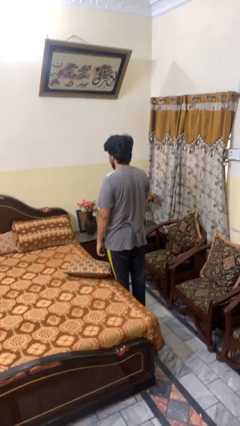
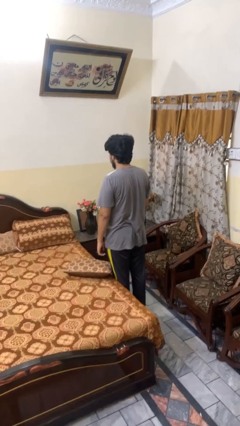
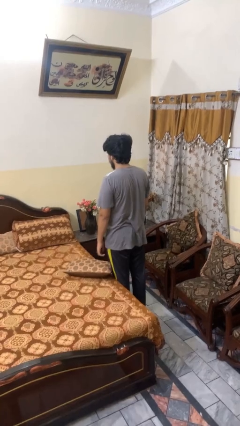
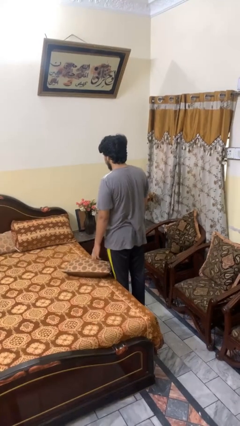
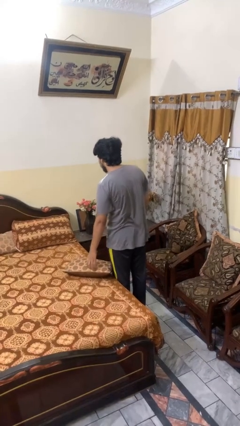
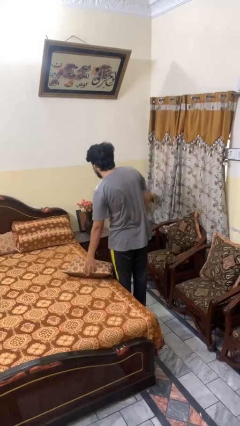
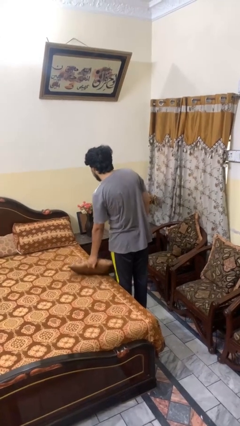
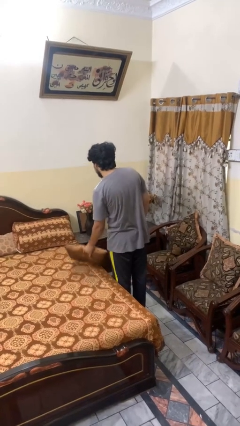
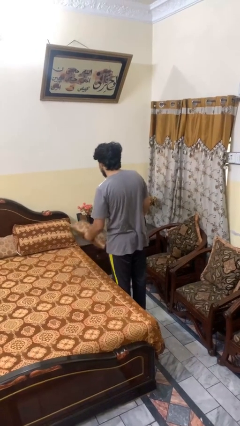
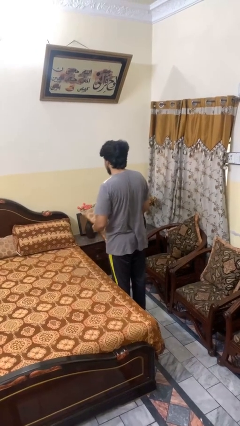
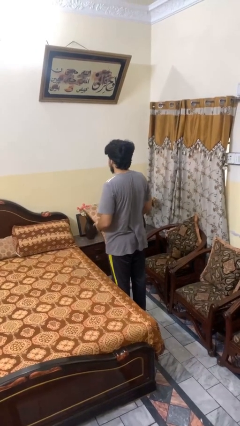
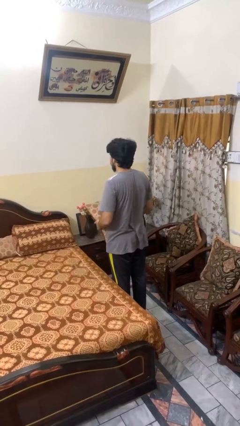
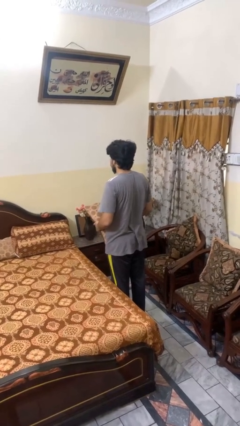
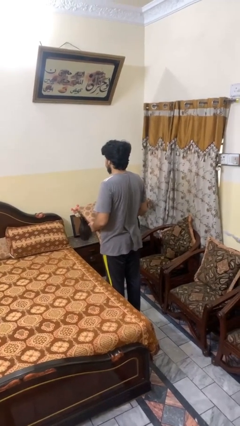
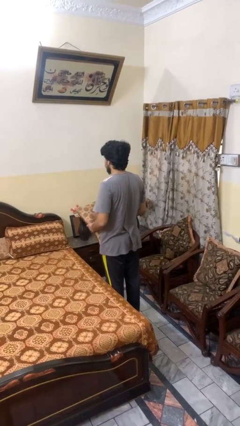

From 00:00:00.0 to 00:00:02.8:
person picks up object from bed

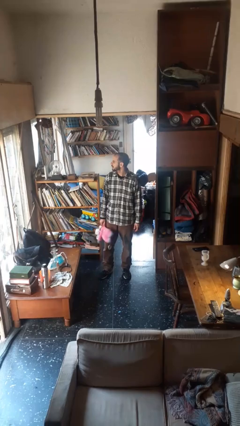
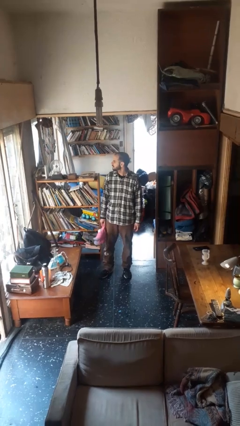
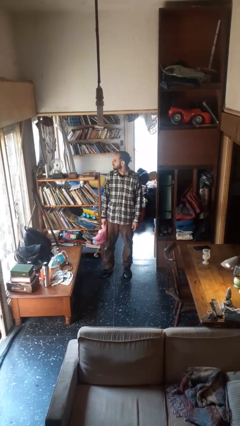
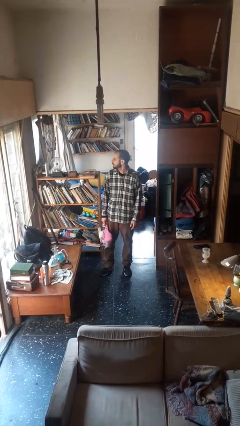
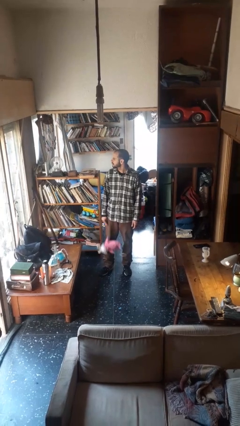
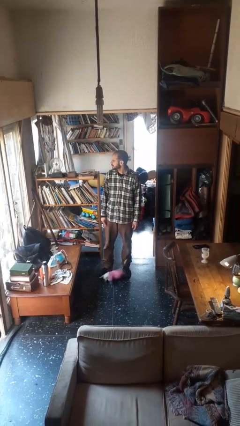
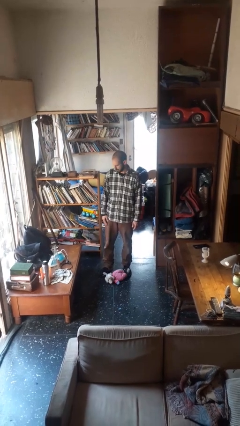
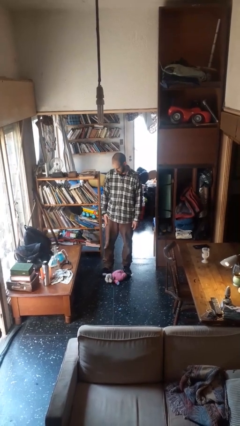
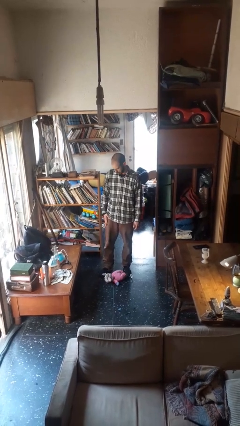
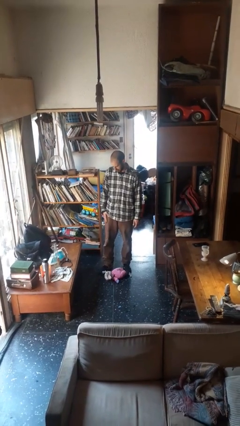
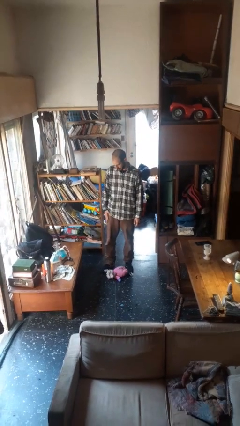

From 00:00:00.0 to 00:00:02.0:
person drops object

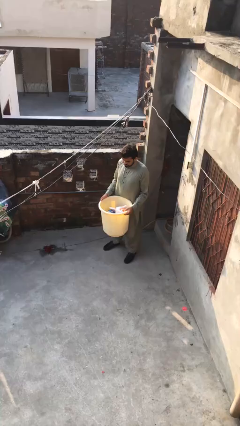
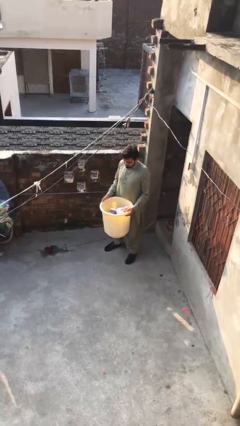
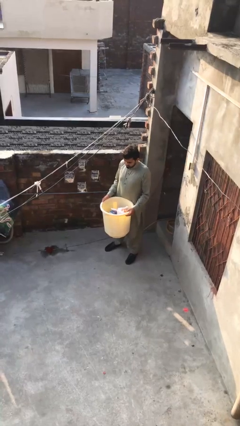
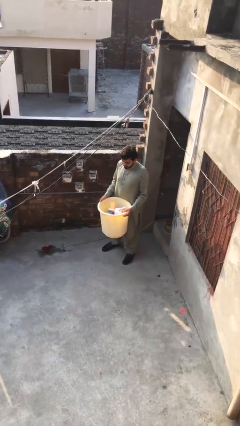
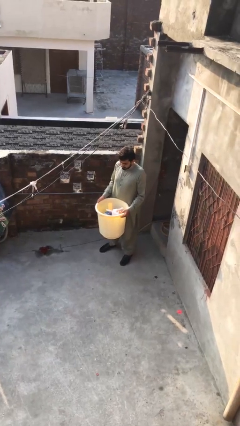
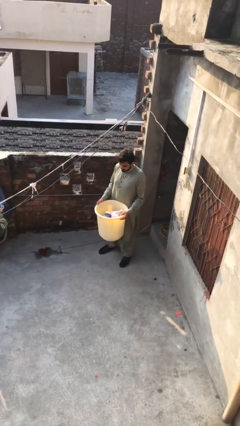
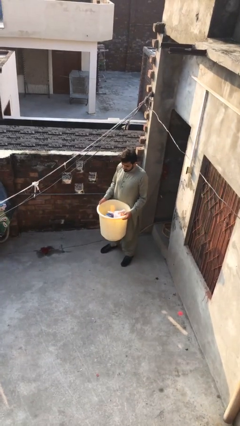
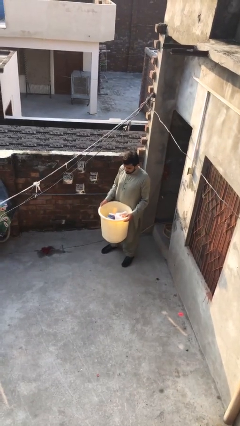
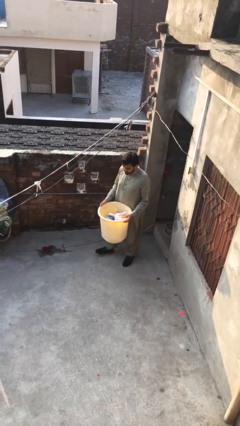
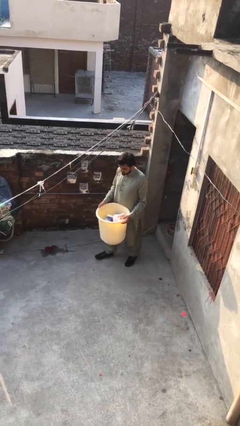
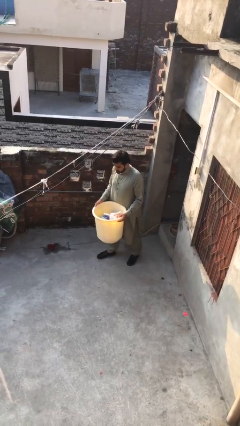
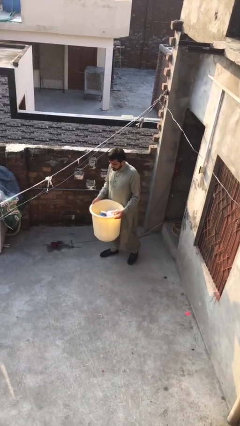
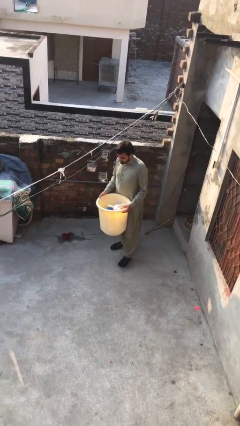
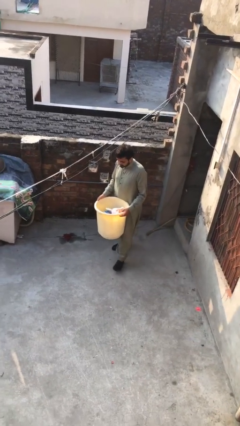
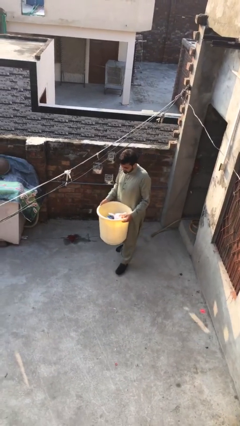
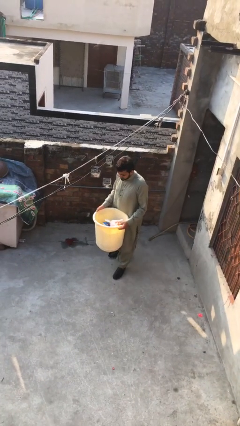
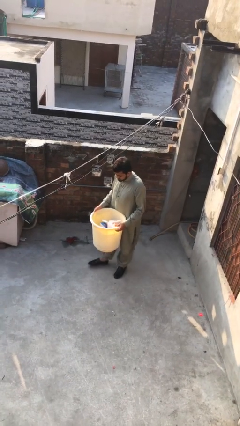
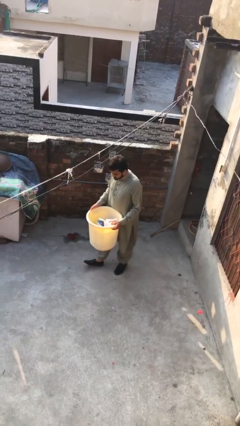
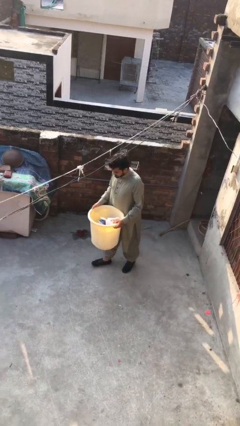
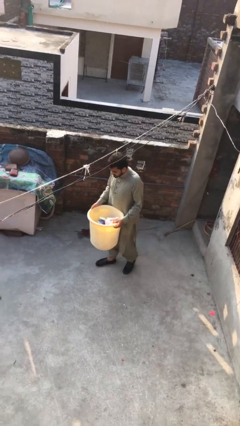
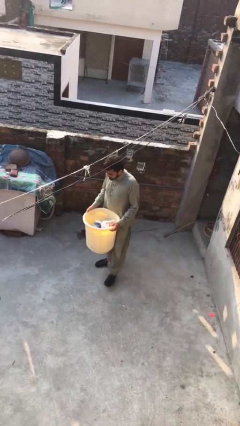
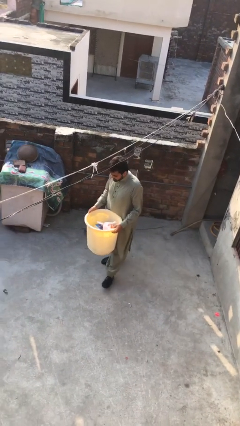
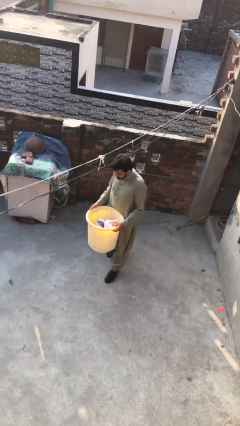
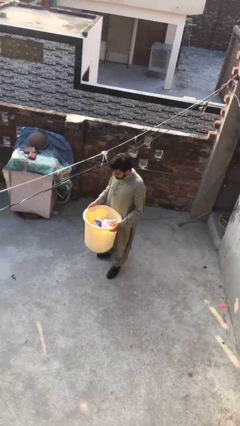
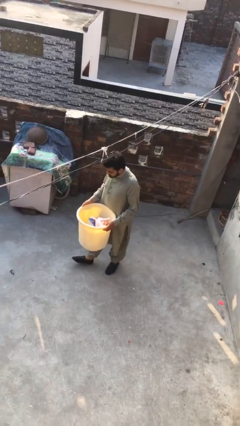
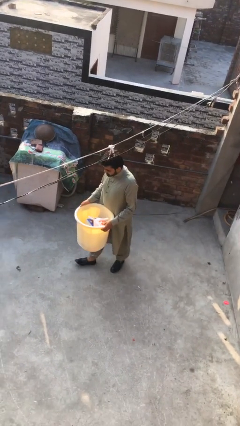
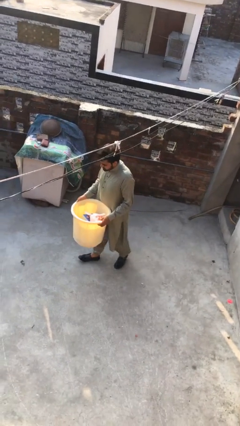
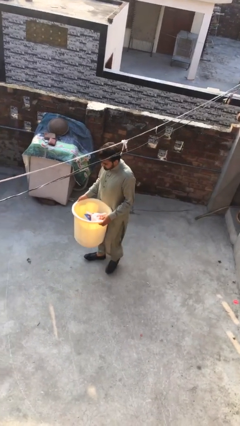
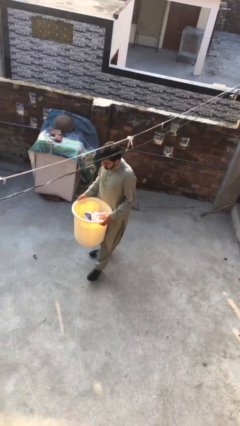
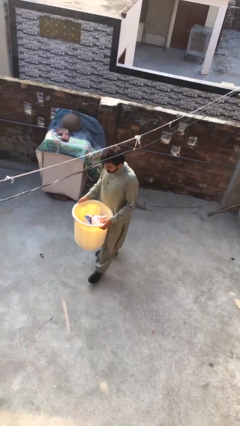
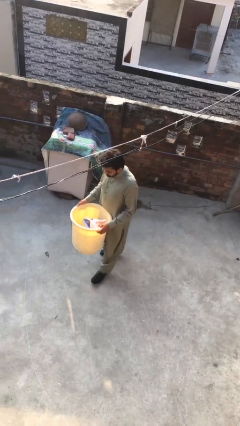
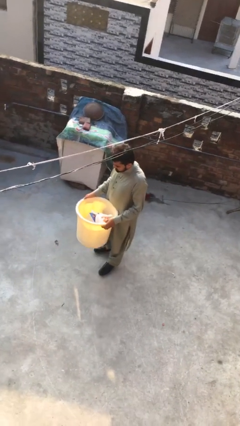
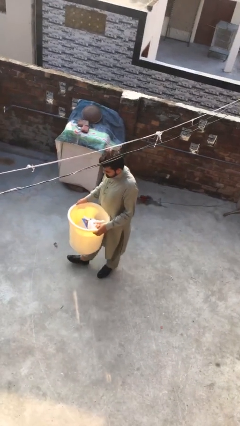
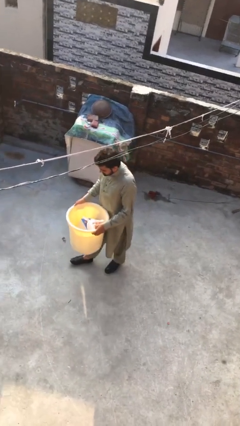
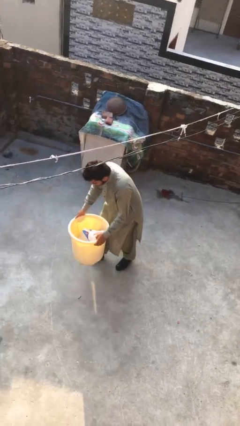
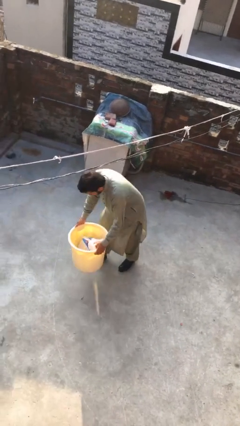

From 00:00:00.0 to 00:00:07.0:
person carries heavy object

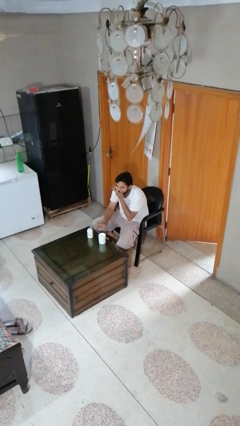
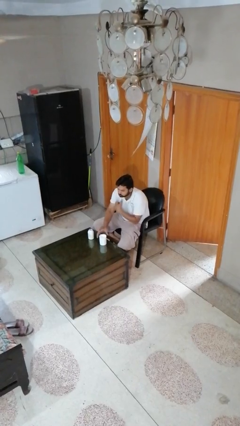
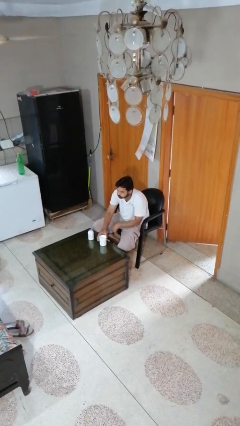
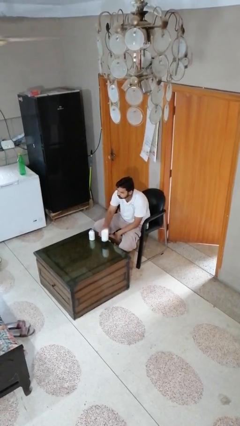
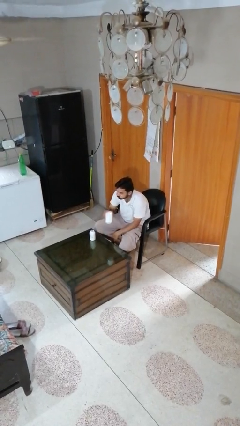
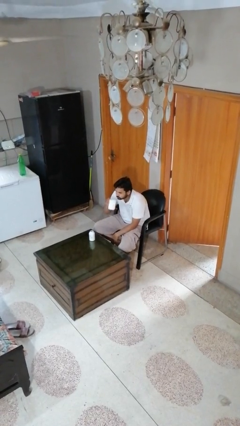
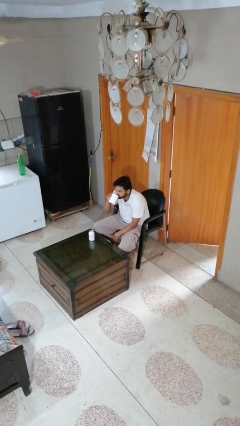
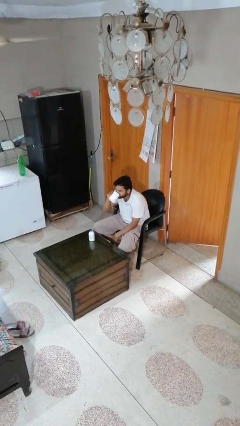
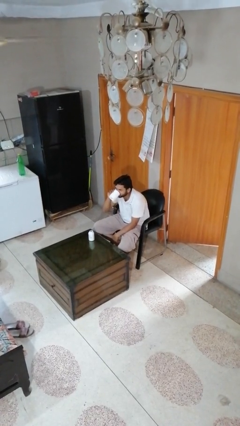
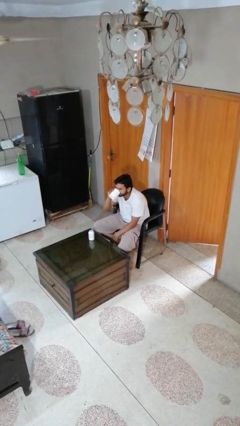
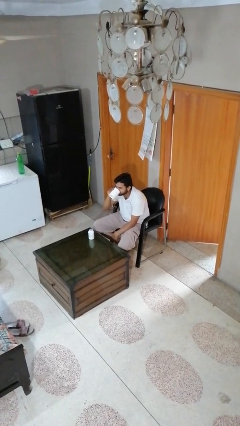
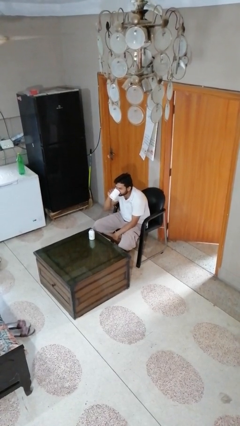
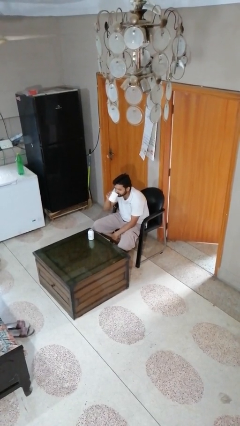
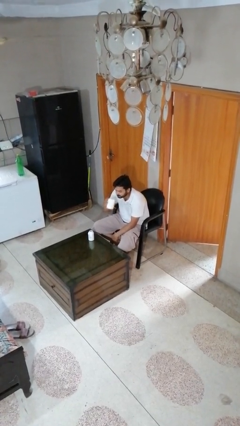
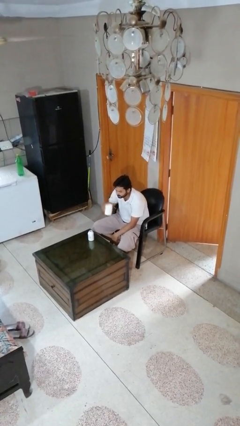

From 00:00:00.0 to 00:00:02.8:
person drinks from cup

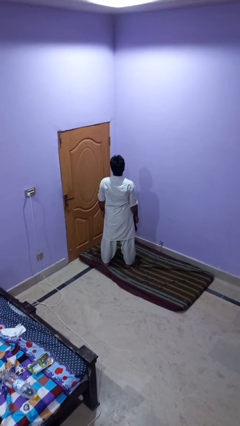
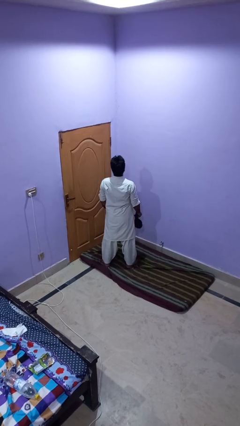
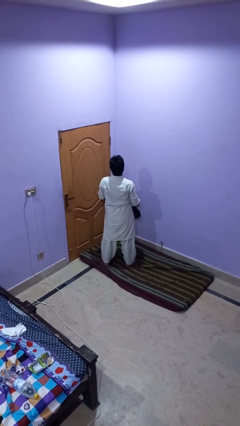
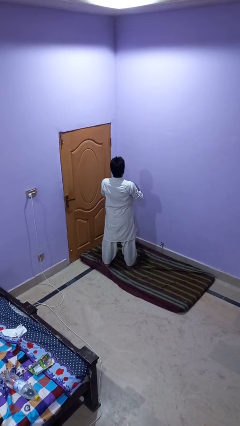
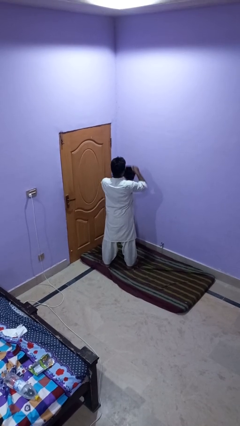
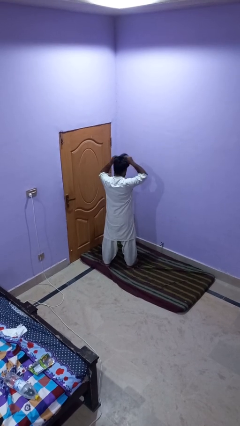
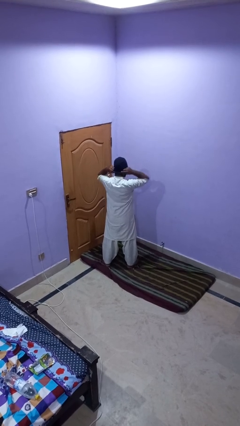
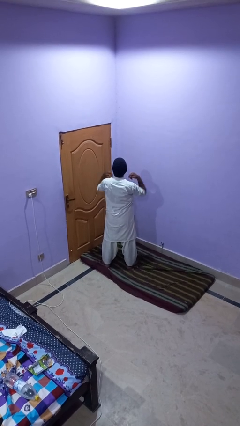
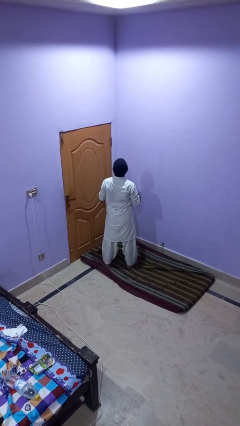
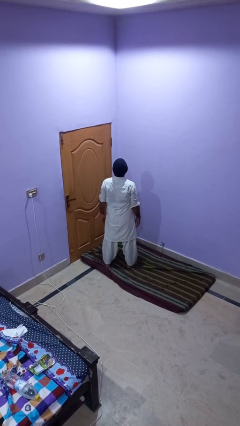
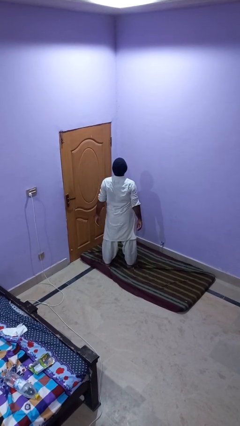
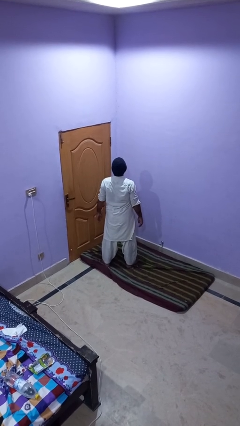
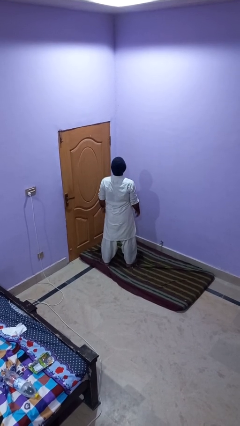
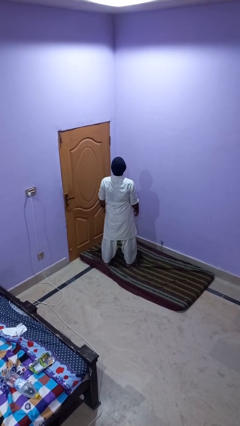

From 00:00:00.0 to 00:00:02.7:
person puts on hat
